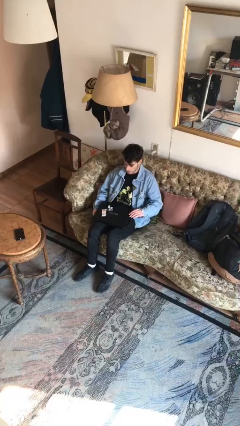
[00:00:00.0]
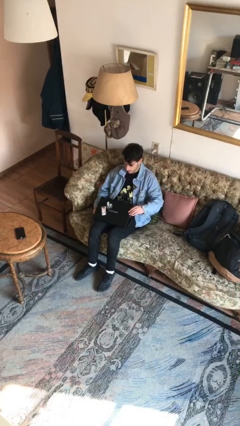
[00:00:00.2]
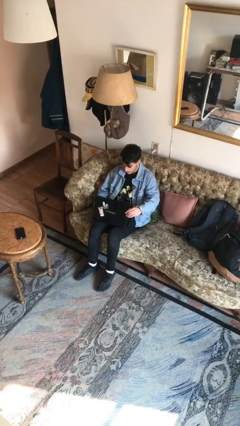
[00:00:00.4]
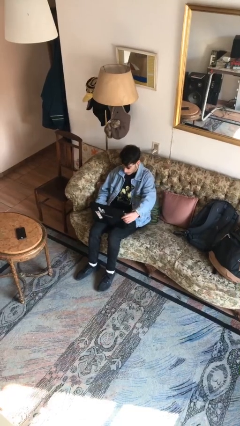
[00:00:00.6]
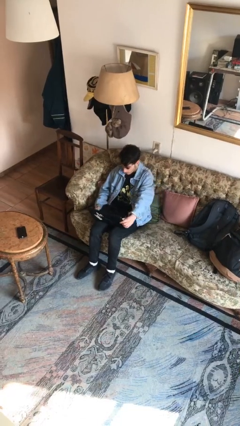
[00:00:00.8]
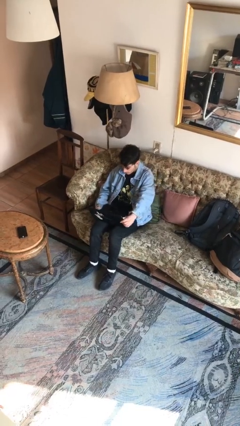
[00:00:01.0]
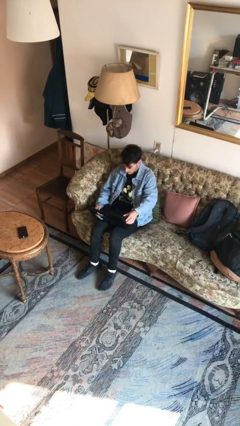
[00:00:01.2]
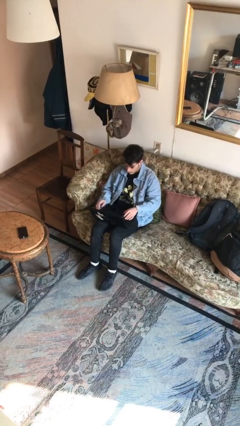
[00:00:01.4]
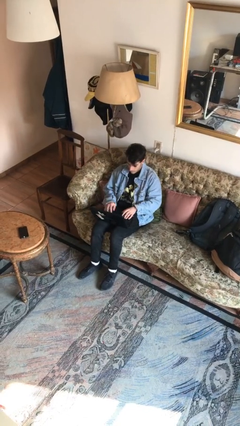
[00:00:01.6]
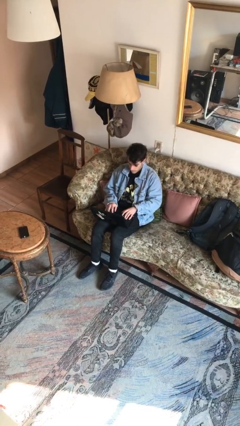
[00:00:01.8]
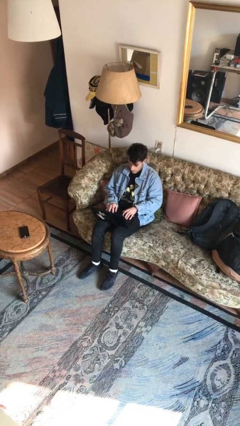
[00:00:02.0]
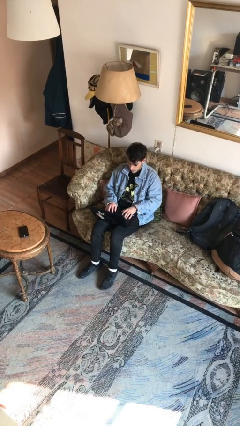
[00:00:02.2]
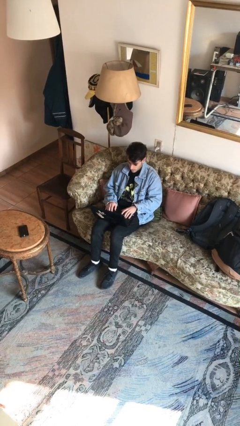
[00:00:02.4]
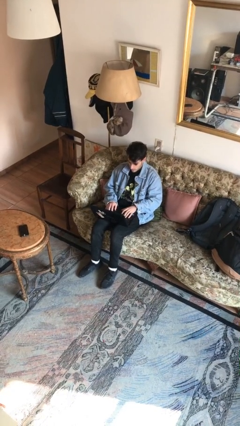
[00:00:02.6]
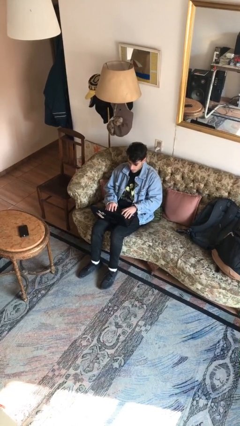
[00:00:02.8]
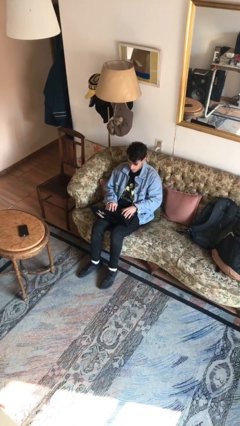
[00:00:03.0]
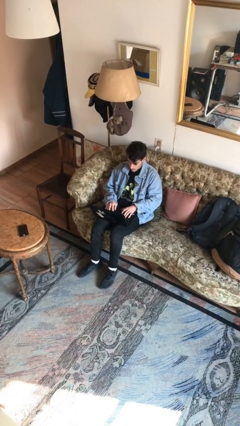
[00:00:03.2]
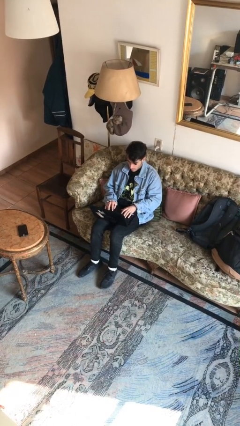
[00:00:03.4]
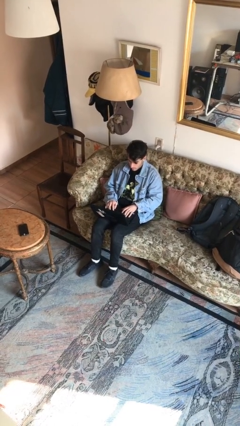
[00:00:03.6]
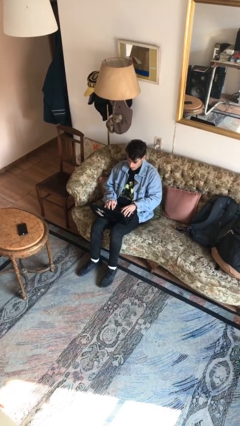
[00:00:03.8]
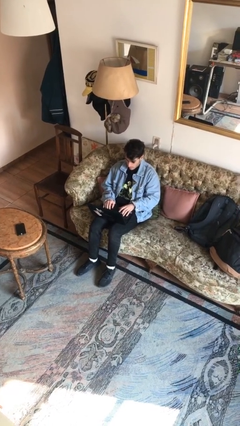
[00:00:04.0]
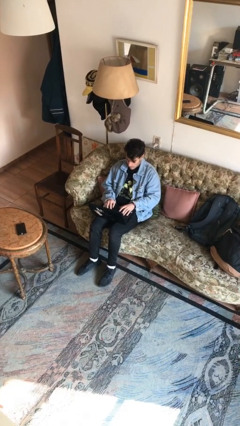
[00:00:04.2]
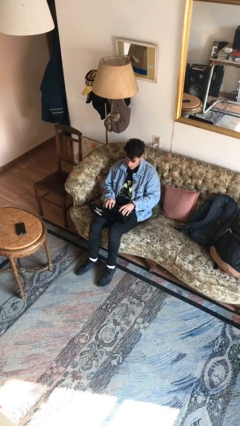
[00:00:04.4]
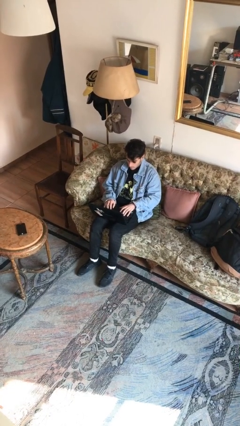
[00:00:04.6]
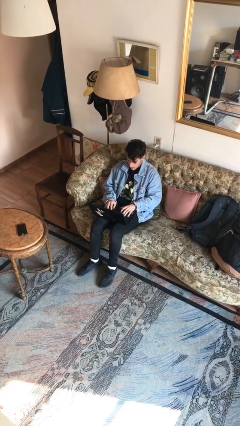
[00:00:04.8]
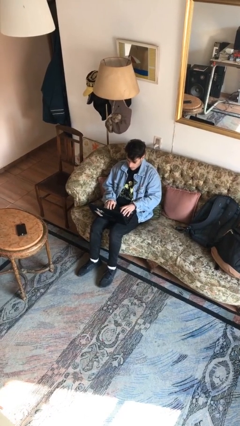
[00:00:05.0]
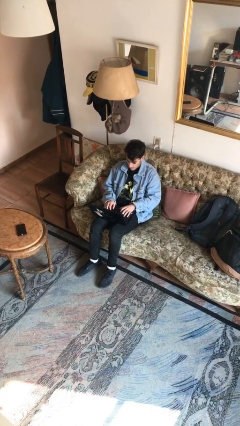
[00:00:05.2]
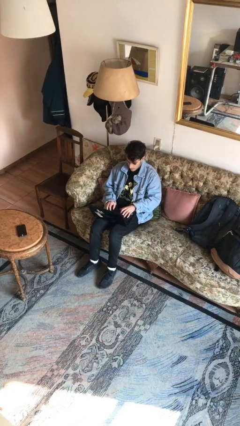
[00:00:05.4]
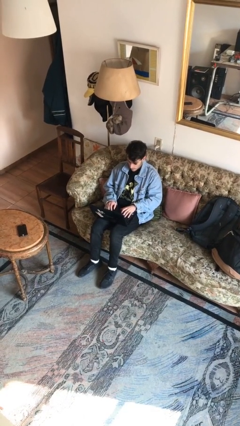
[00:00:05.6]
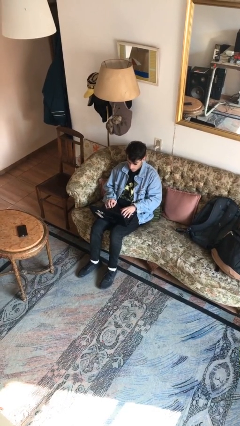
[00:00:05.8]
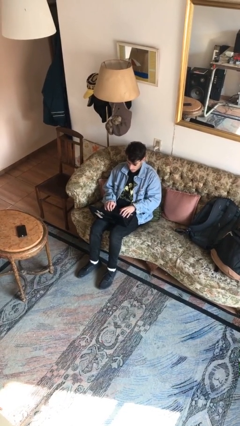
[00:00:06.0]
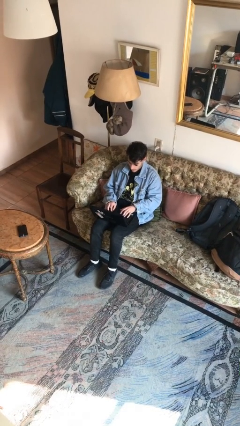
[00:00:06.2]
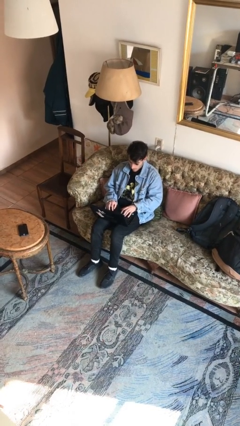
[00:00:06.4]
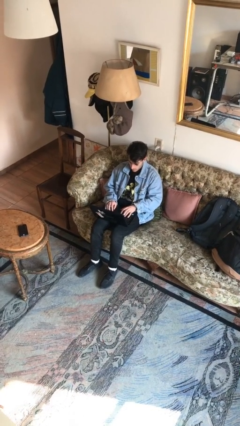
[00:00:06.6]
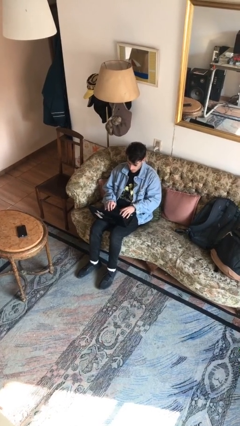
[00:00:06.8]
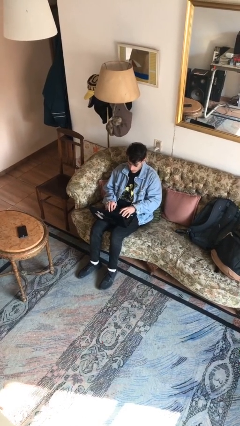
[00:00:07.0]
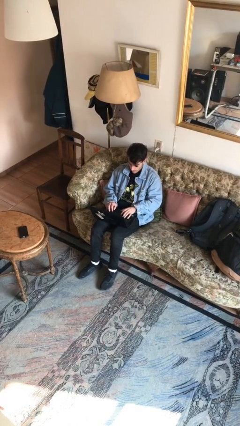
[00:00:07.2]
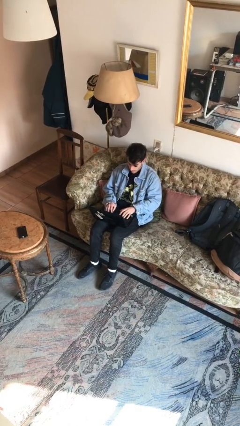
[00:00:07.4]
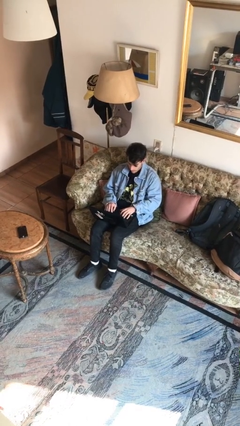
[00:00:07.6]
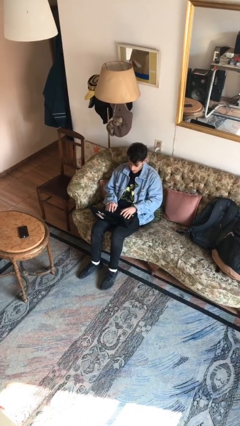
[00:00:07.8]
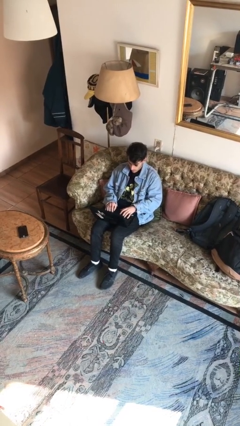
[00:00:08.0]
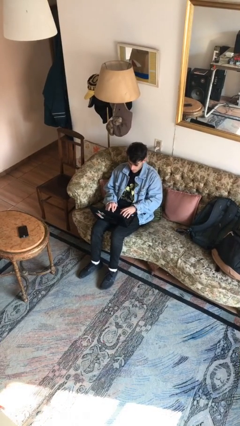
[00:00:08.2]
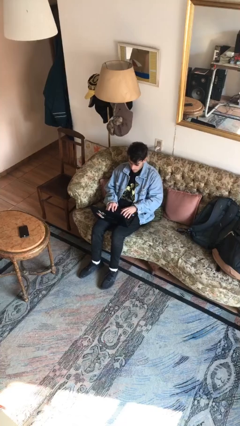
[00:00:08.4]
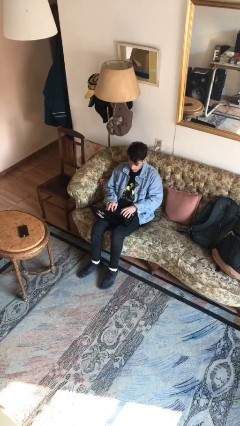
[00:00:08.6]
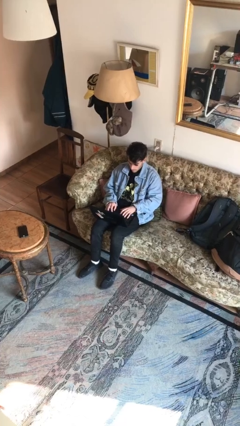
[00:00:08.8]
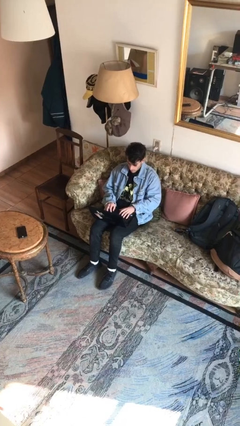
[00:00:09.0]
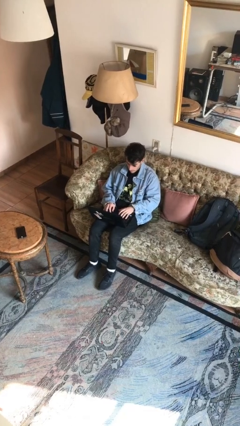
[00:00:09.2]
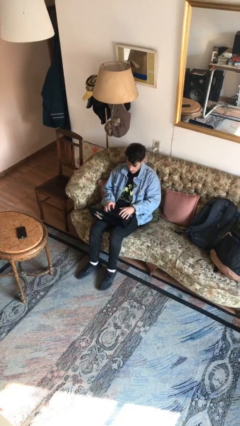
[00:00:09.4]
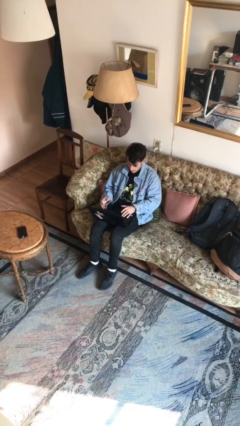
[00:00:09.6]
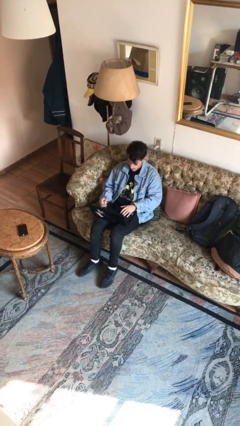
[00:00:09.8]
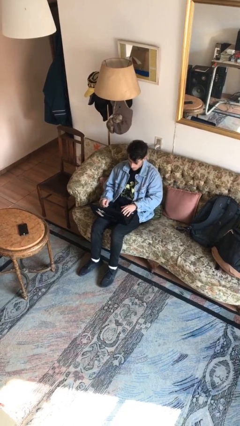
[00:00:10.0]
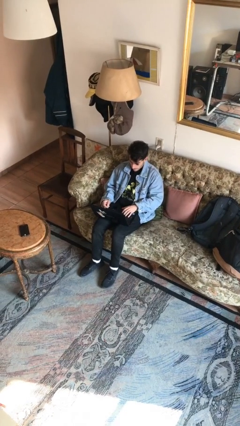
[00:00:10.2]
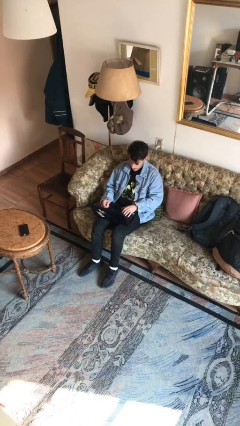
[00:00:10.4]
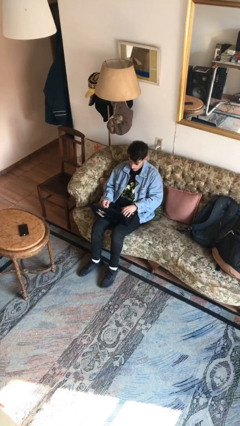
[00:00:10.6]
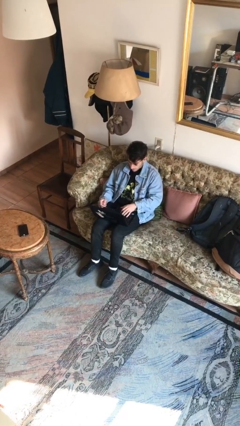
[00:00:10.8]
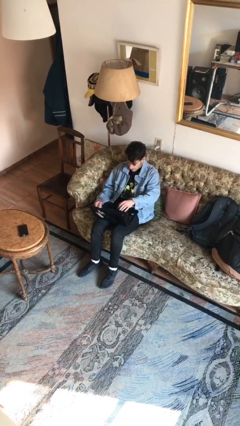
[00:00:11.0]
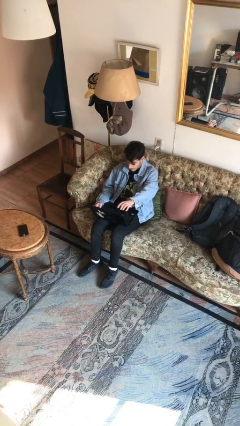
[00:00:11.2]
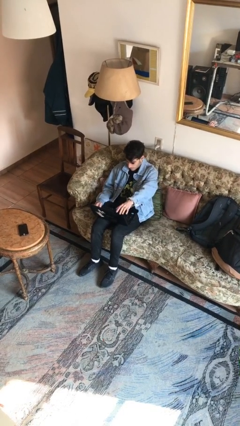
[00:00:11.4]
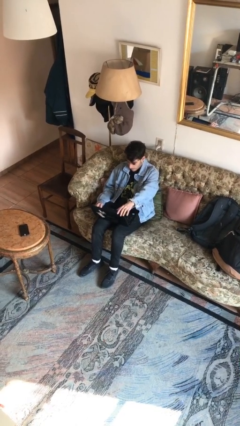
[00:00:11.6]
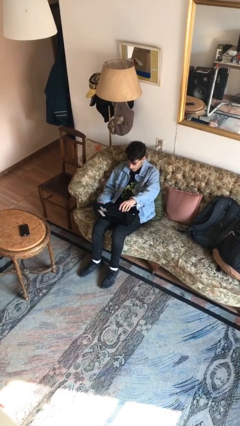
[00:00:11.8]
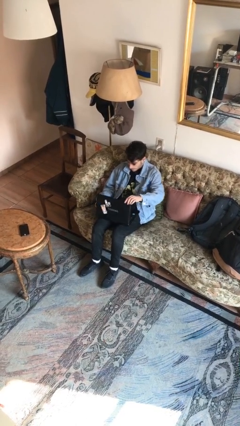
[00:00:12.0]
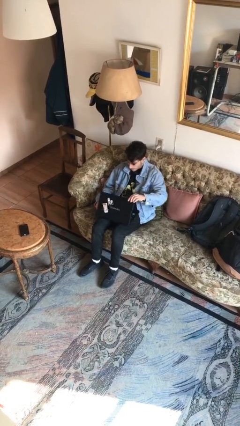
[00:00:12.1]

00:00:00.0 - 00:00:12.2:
person interacts with laptop

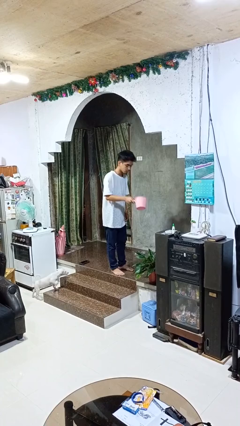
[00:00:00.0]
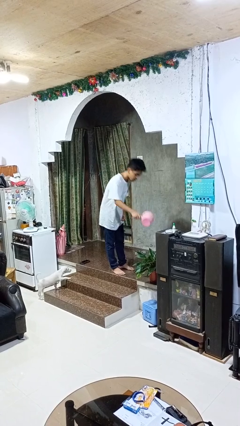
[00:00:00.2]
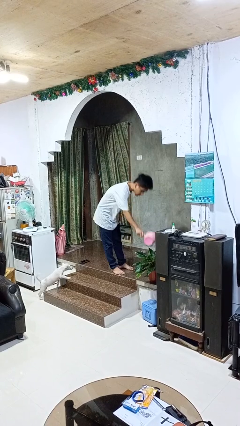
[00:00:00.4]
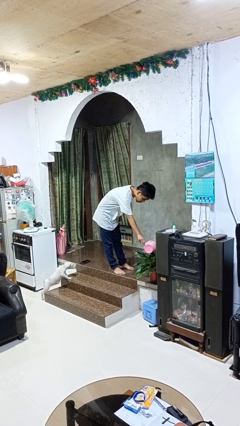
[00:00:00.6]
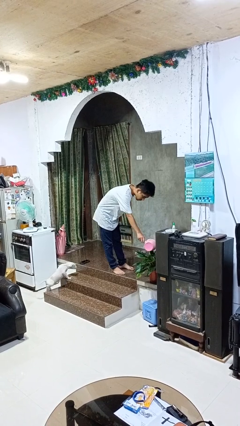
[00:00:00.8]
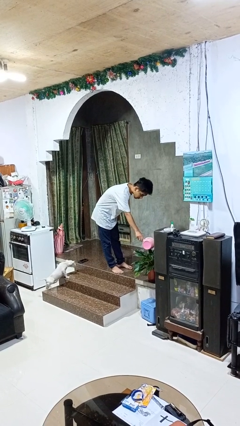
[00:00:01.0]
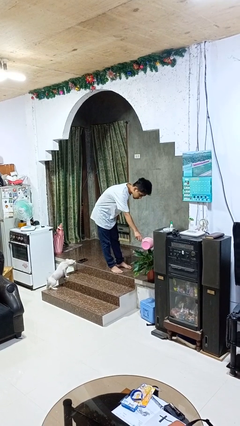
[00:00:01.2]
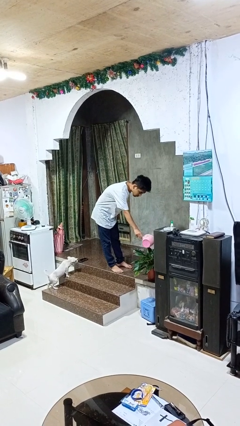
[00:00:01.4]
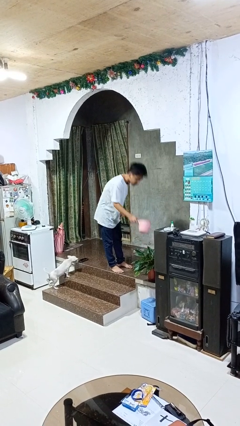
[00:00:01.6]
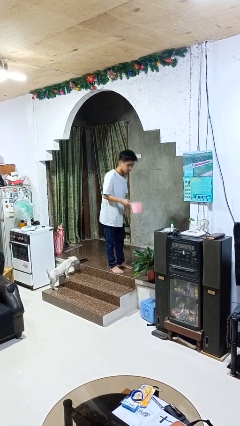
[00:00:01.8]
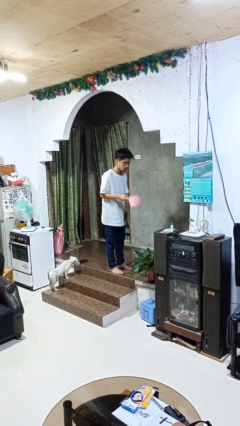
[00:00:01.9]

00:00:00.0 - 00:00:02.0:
person waters houseplant

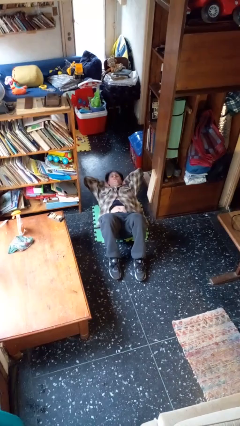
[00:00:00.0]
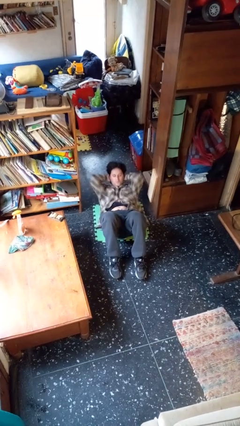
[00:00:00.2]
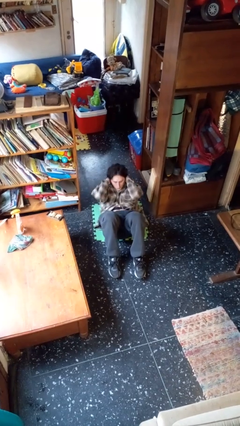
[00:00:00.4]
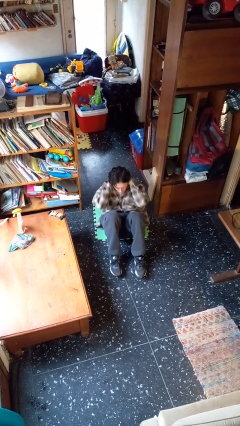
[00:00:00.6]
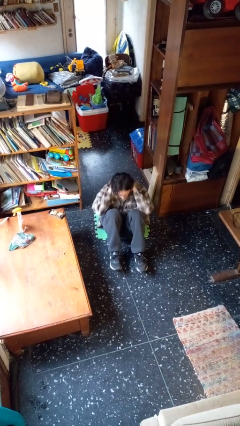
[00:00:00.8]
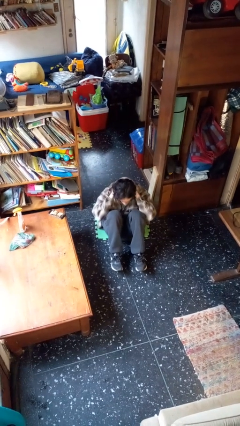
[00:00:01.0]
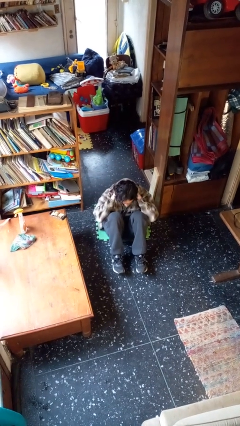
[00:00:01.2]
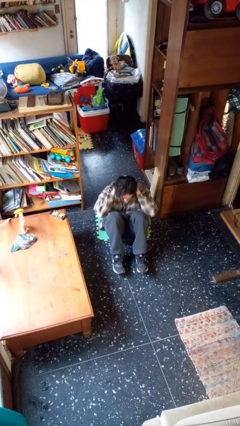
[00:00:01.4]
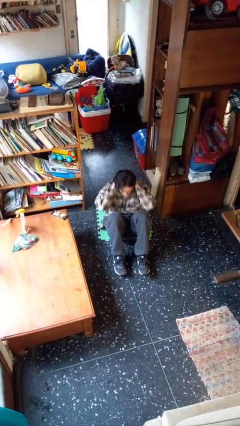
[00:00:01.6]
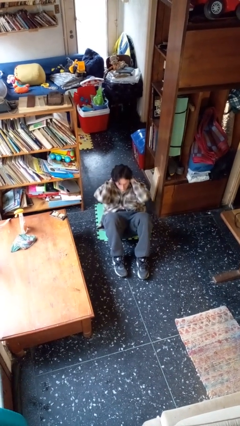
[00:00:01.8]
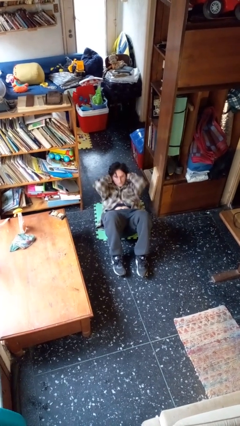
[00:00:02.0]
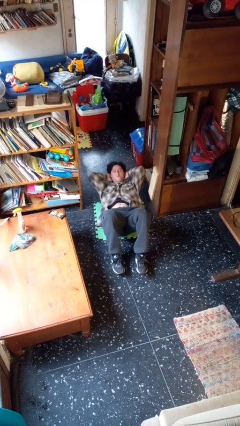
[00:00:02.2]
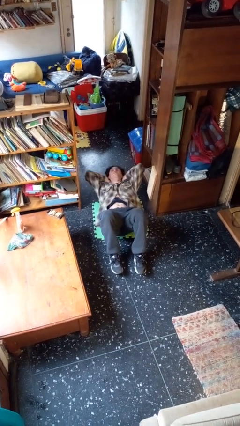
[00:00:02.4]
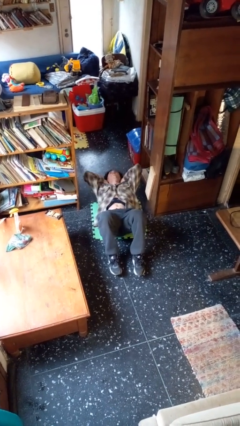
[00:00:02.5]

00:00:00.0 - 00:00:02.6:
person exercises with situp

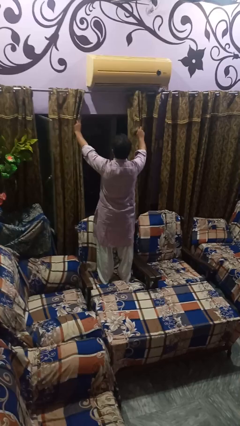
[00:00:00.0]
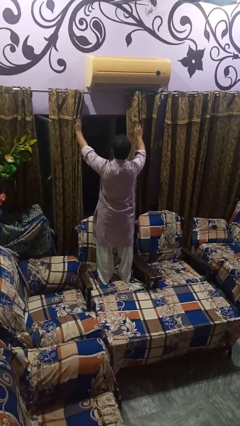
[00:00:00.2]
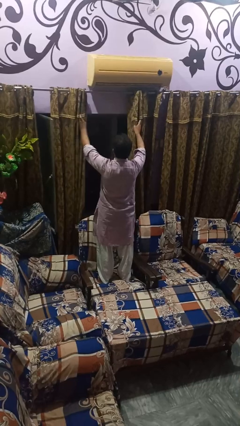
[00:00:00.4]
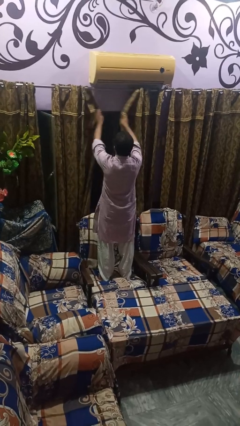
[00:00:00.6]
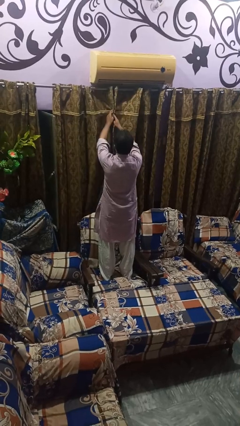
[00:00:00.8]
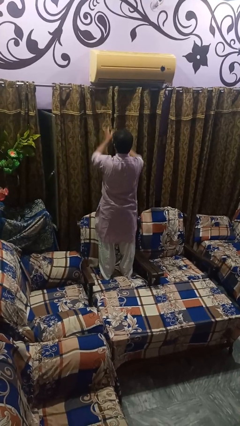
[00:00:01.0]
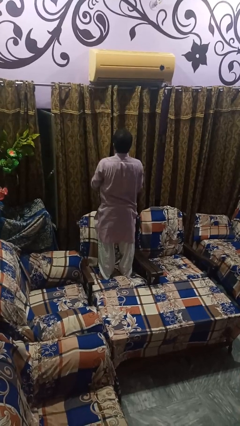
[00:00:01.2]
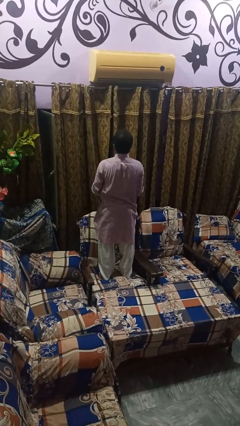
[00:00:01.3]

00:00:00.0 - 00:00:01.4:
person closes curtains
